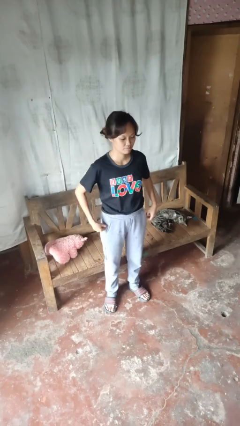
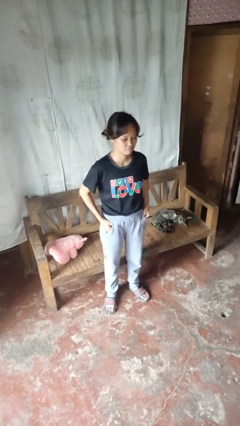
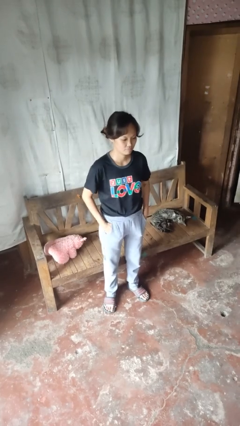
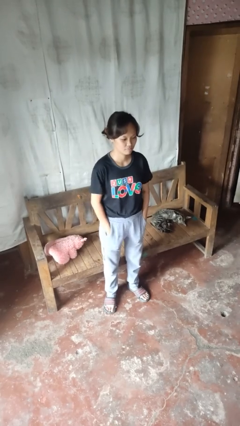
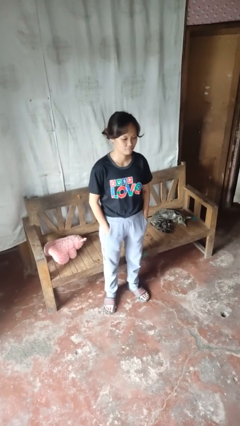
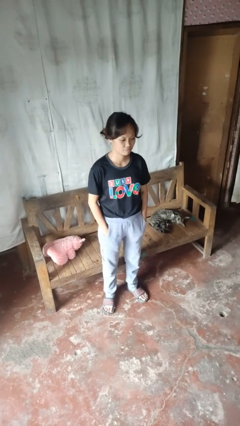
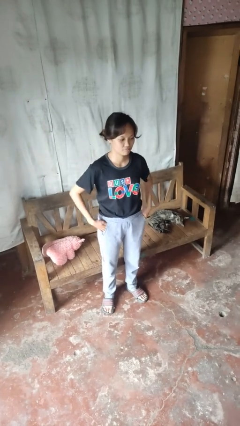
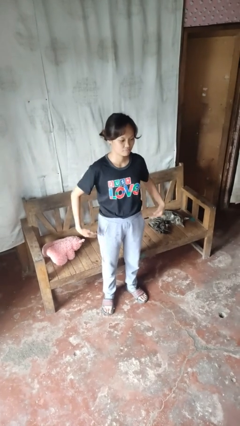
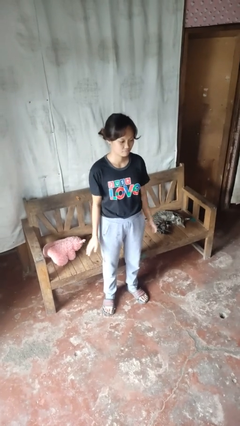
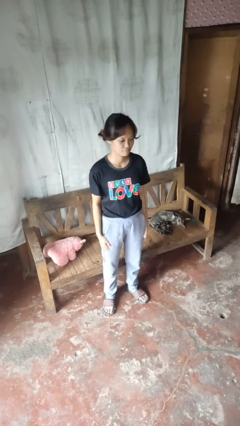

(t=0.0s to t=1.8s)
person puts hands in back pockets

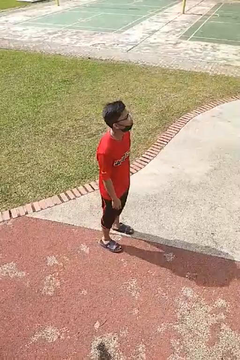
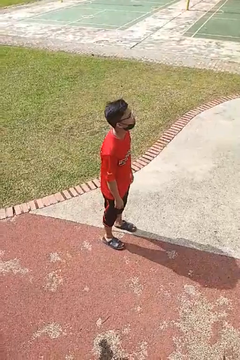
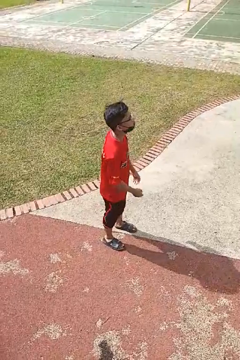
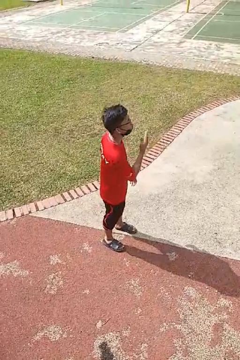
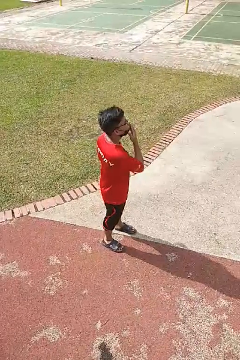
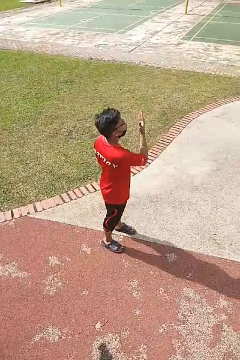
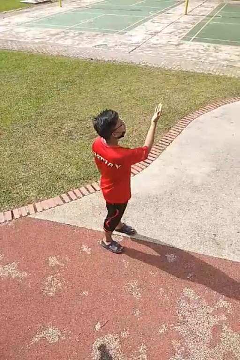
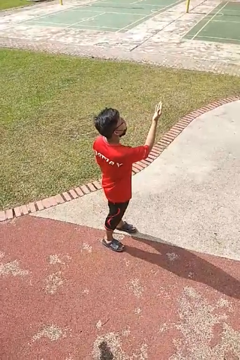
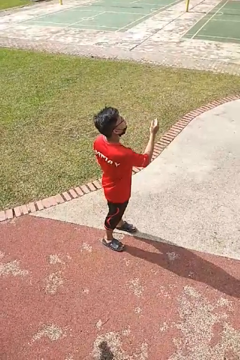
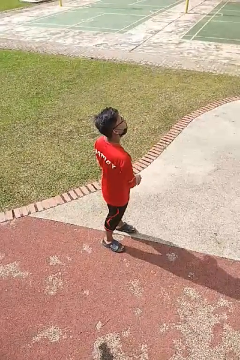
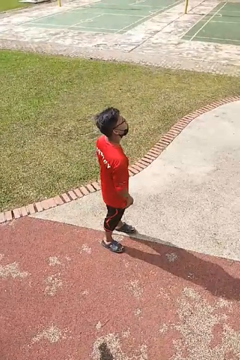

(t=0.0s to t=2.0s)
person gestures blow kiss

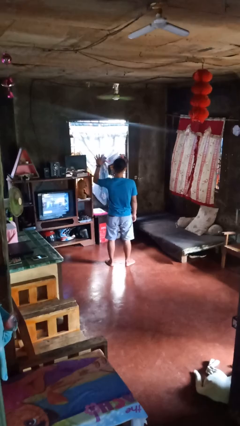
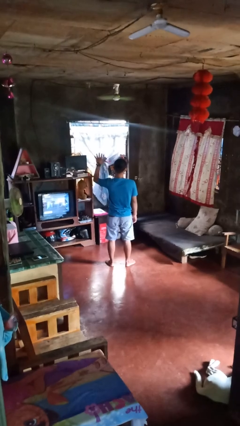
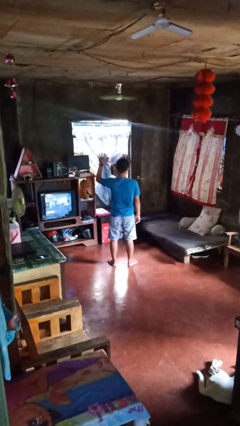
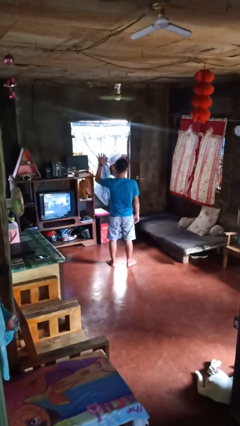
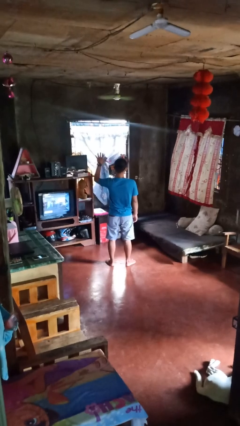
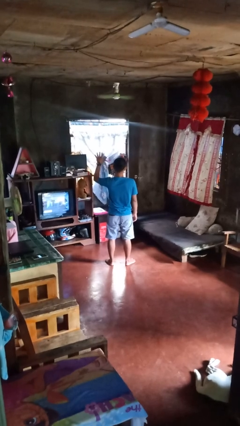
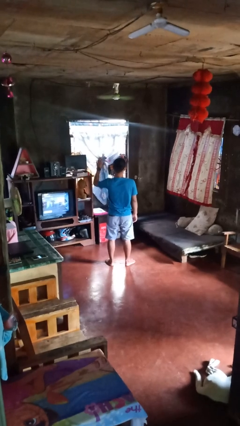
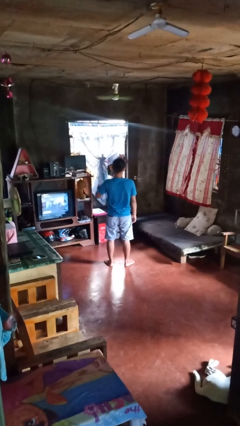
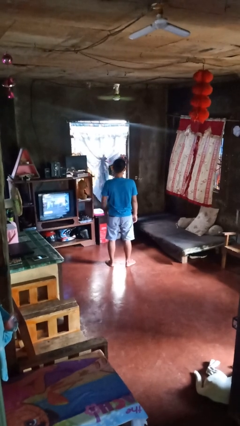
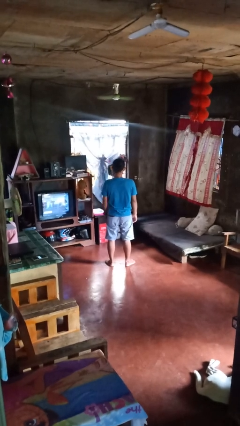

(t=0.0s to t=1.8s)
person gestures number five

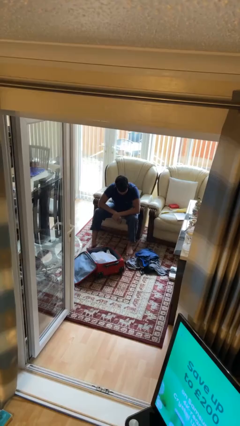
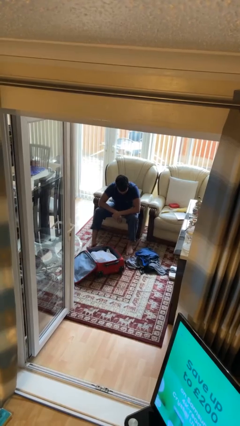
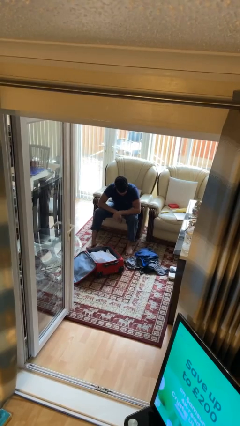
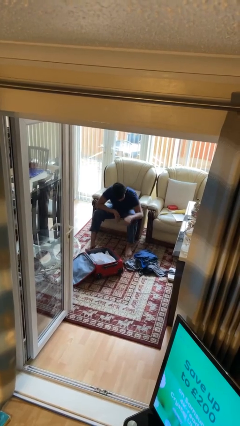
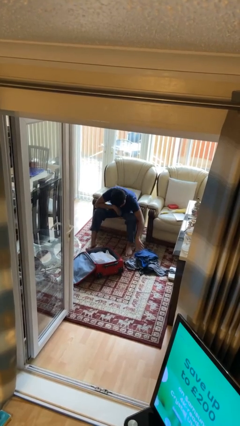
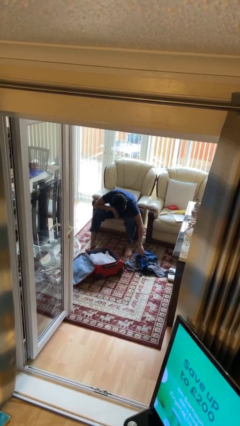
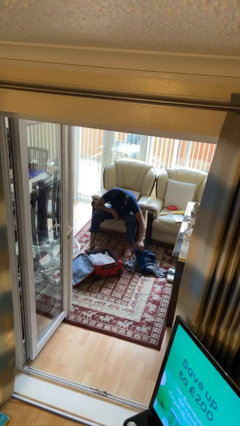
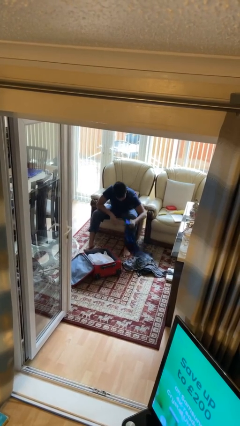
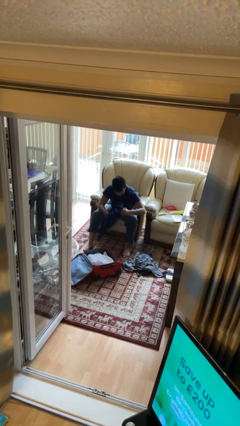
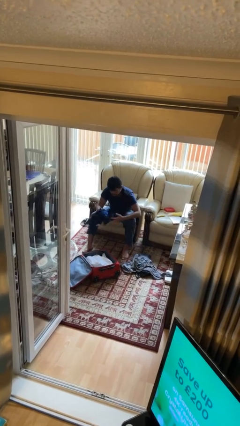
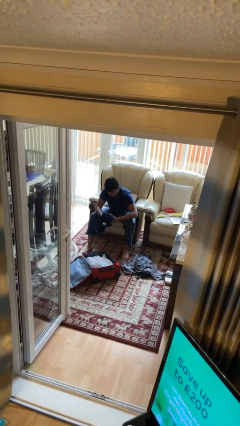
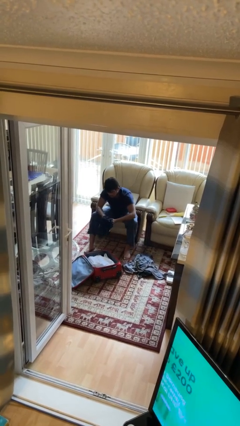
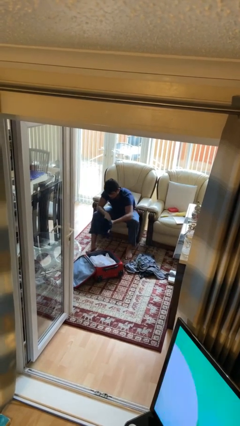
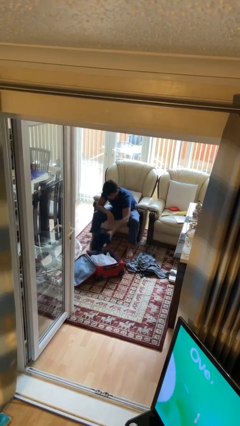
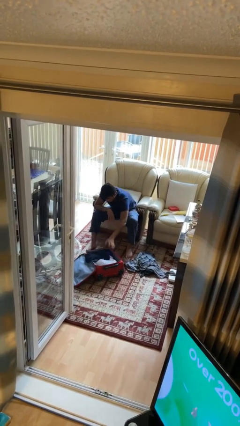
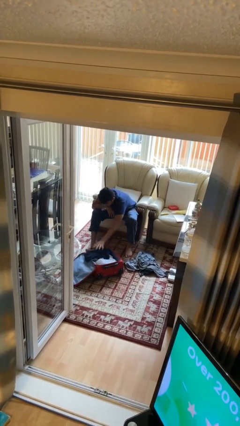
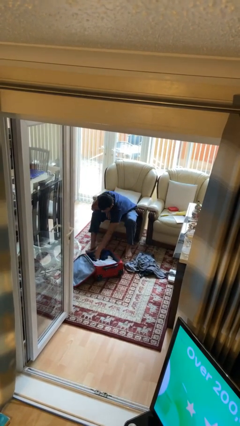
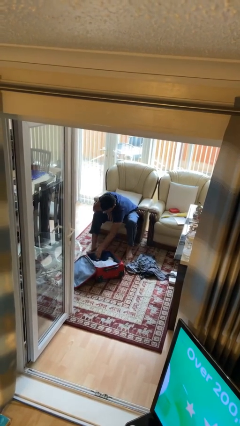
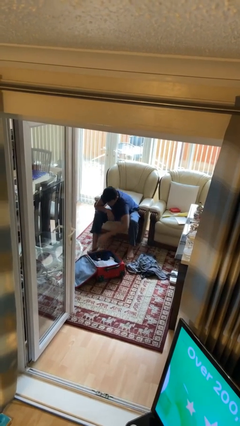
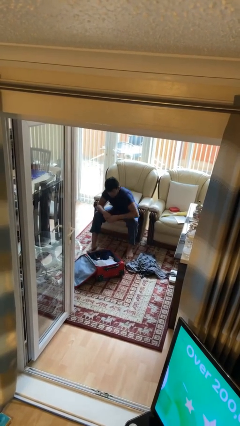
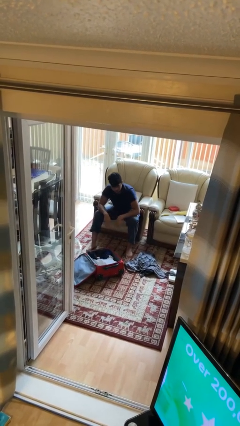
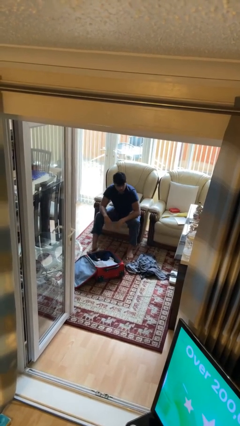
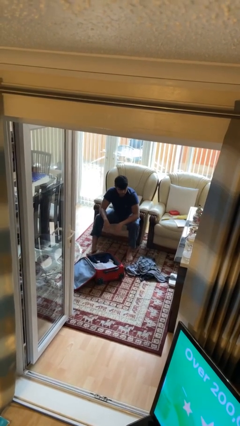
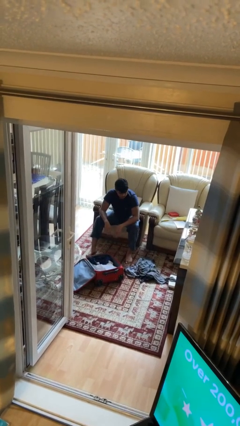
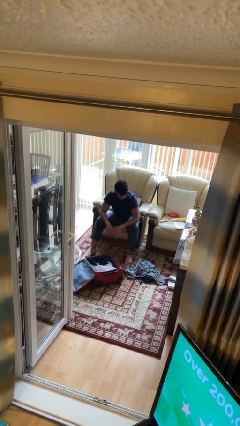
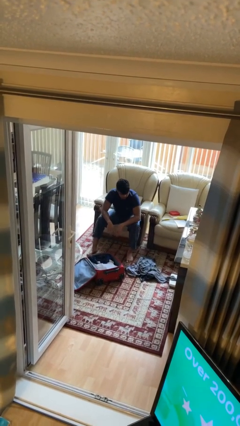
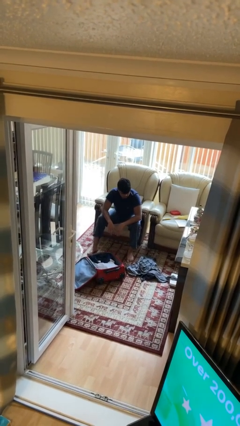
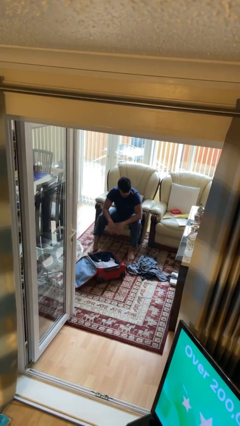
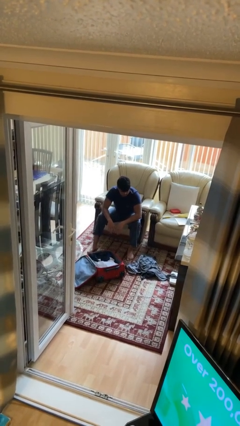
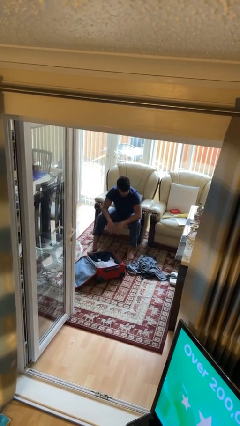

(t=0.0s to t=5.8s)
person loads clothes into suitcase

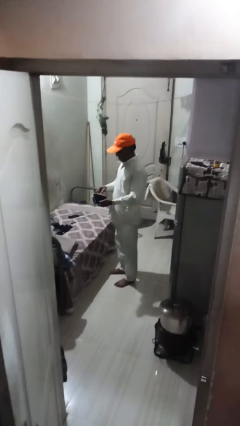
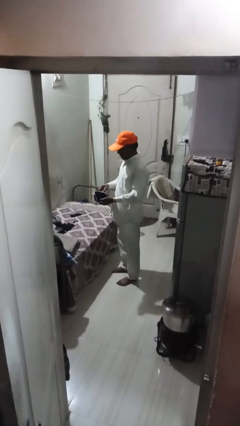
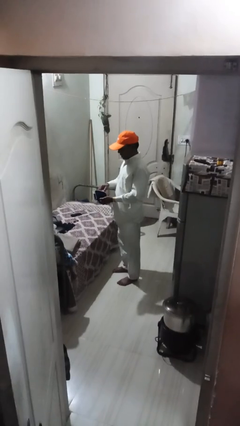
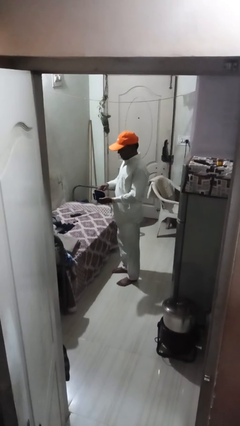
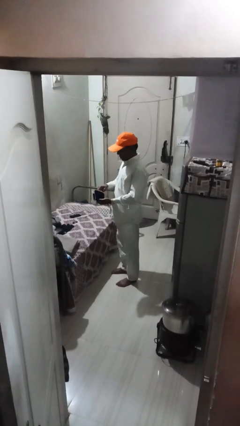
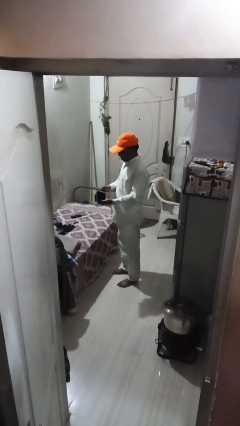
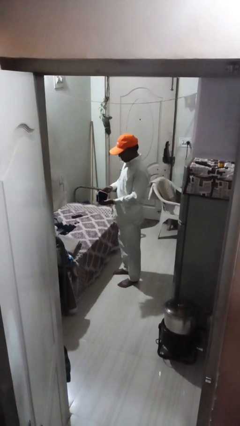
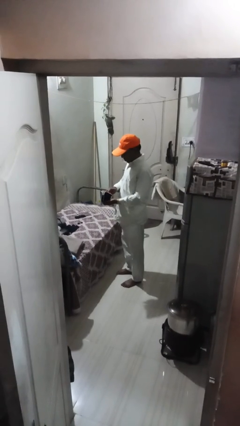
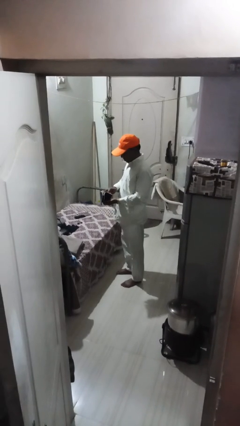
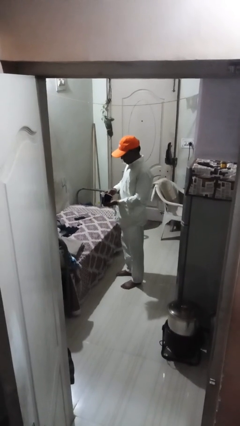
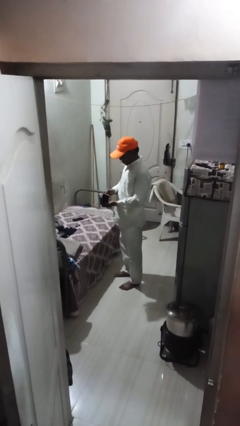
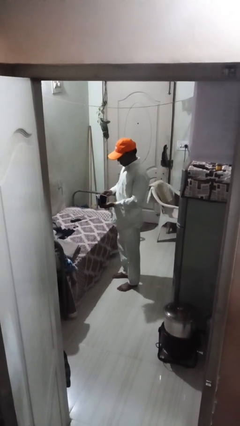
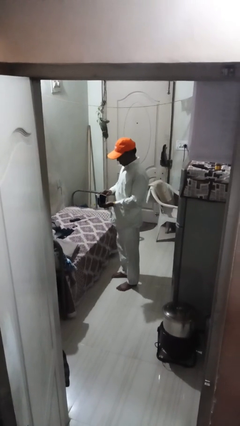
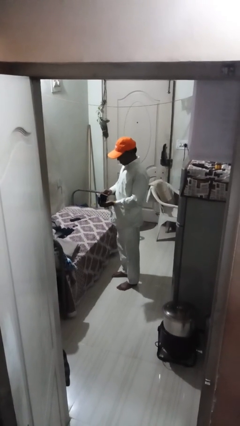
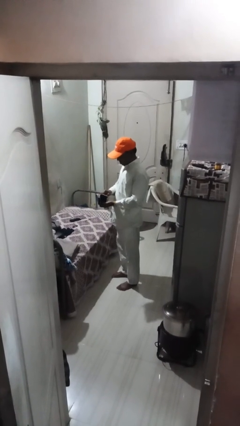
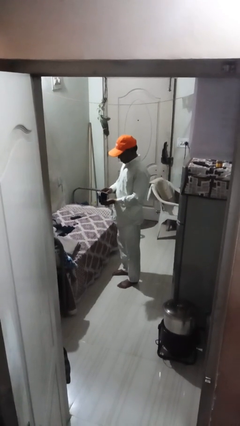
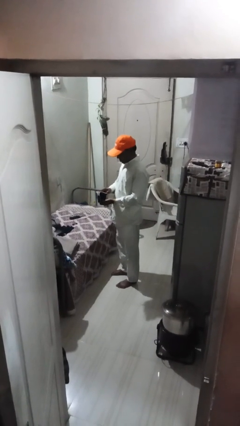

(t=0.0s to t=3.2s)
person searches in purse

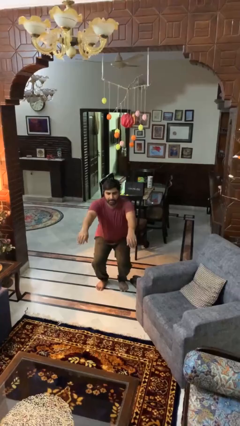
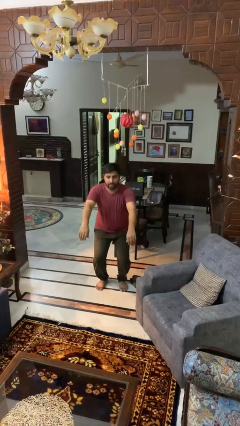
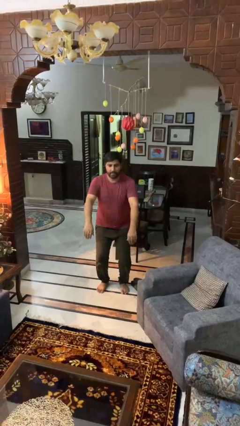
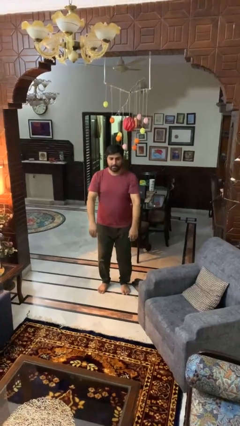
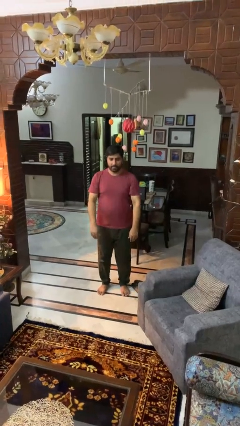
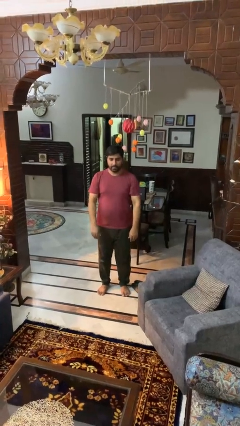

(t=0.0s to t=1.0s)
person stands up

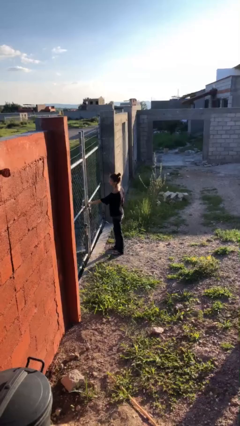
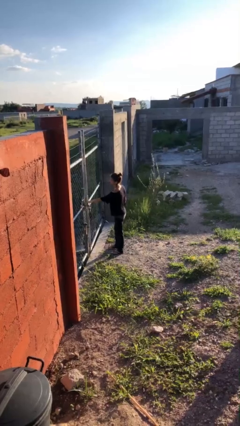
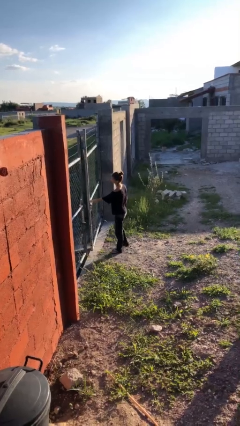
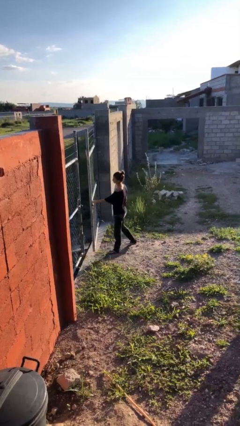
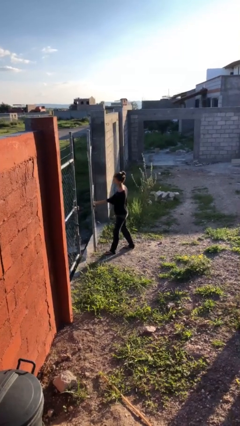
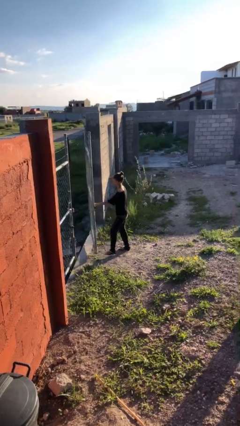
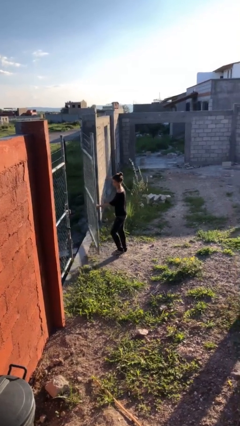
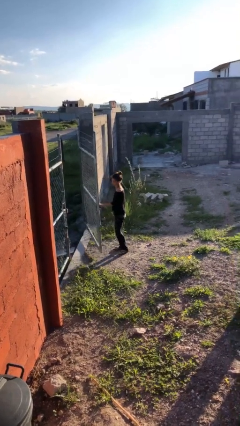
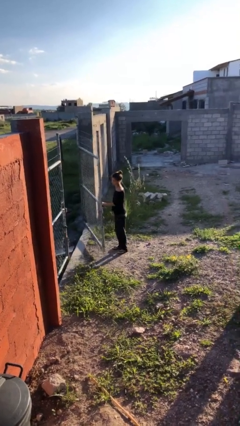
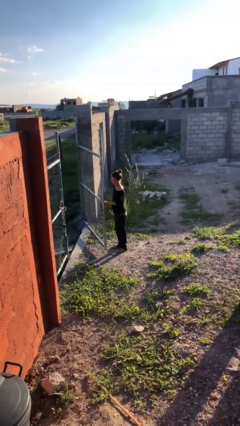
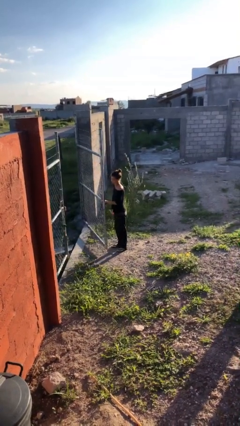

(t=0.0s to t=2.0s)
person opens gate
